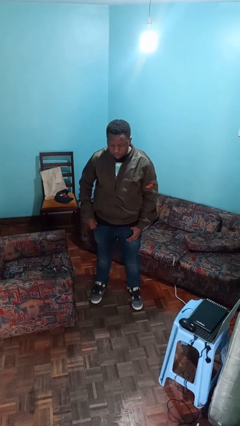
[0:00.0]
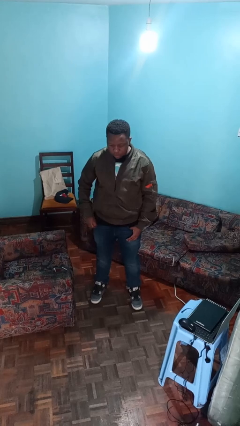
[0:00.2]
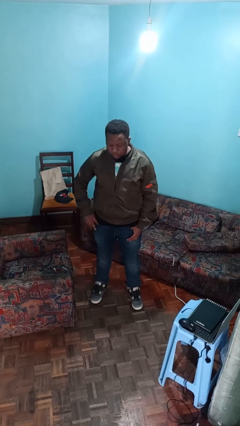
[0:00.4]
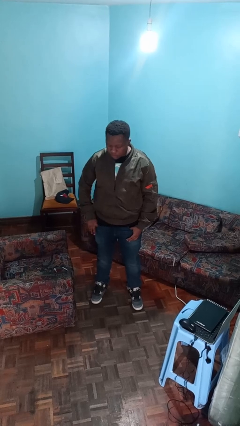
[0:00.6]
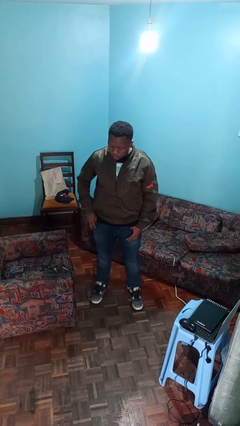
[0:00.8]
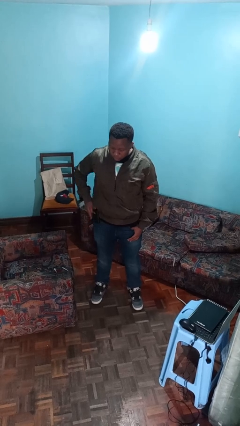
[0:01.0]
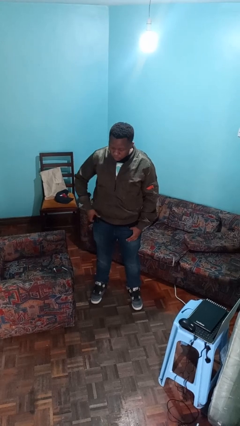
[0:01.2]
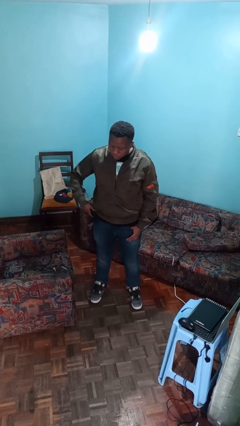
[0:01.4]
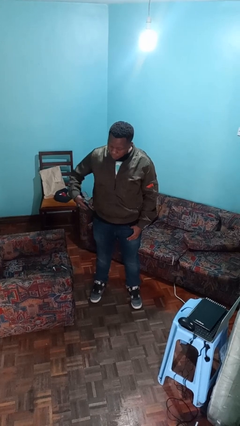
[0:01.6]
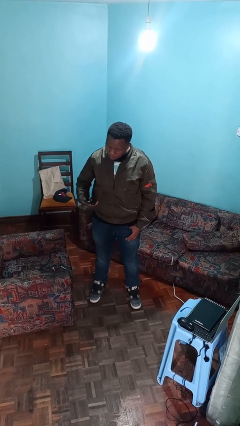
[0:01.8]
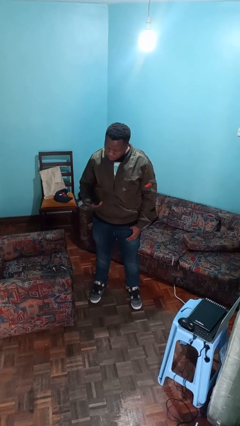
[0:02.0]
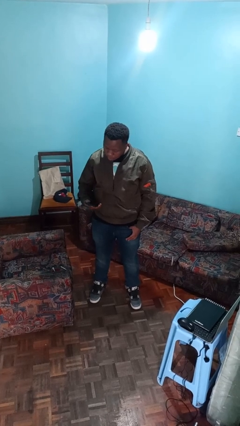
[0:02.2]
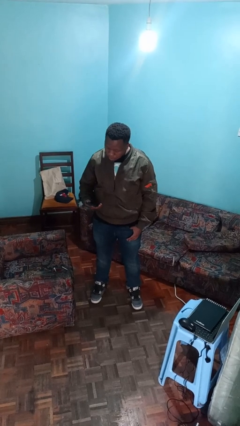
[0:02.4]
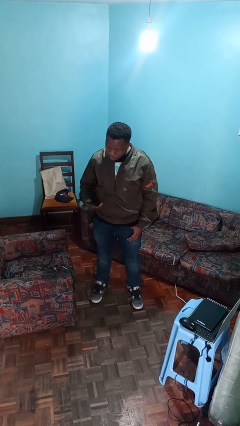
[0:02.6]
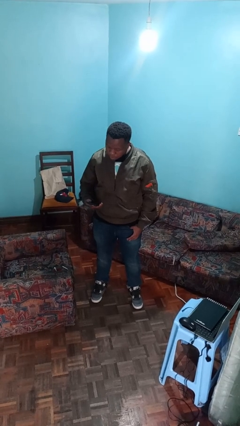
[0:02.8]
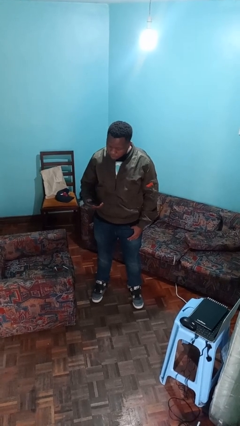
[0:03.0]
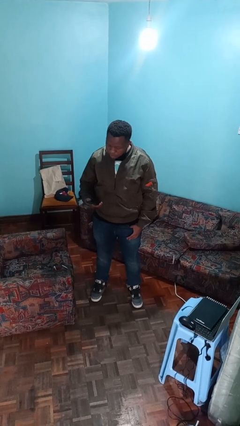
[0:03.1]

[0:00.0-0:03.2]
person takes phone from pocket

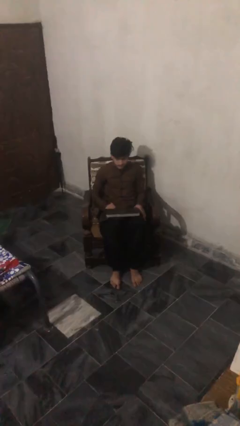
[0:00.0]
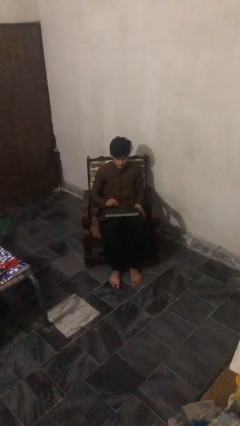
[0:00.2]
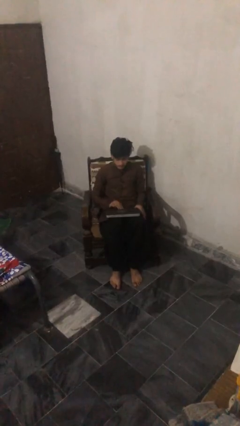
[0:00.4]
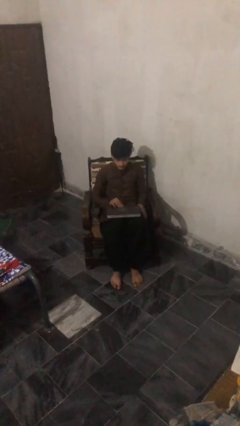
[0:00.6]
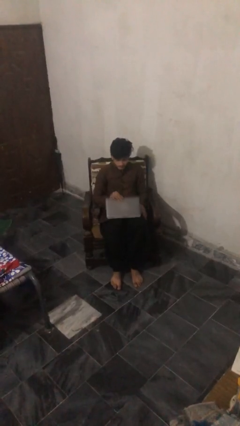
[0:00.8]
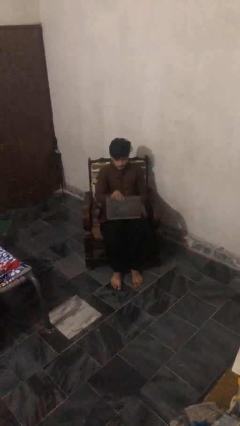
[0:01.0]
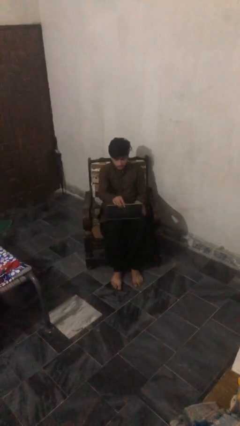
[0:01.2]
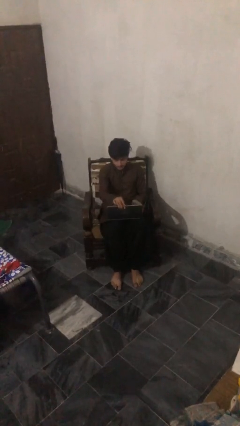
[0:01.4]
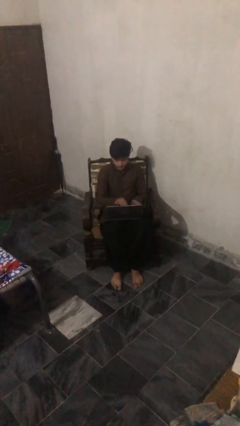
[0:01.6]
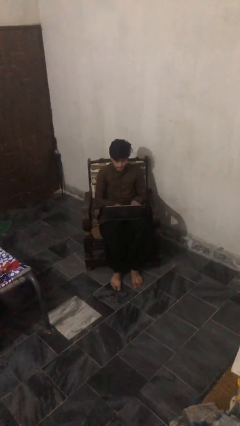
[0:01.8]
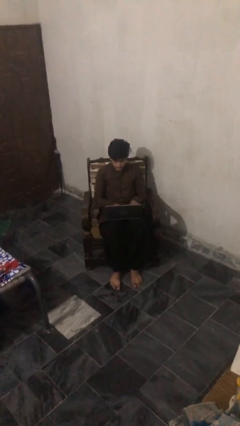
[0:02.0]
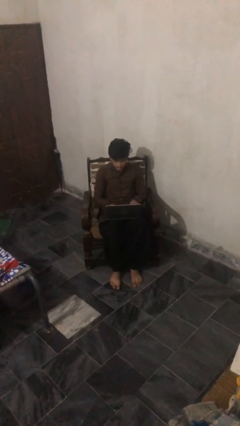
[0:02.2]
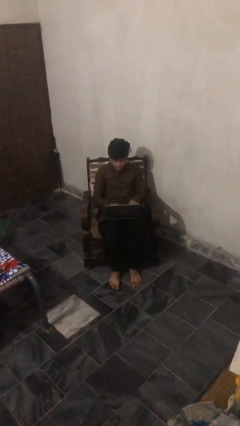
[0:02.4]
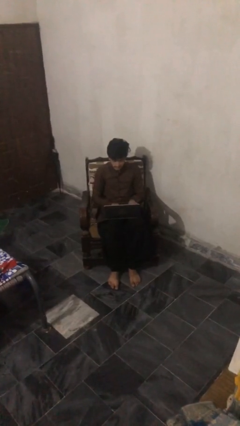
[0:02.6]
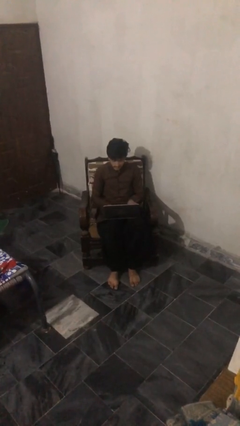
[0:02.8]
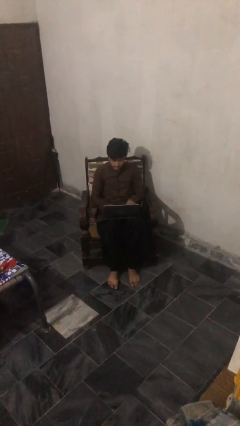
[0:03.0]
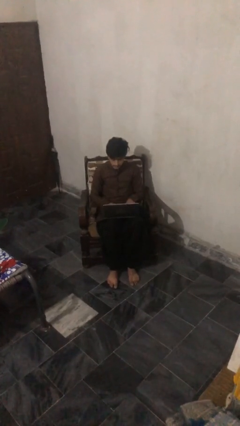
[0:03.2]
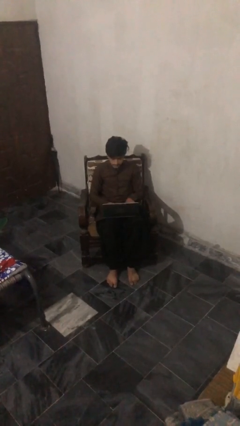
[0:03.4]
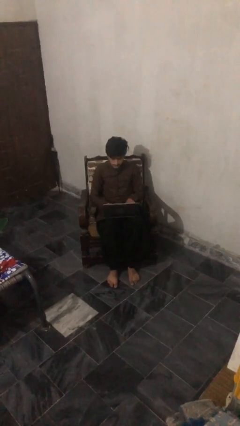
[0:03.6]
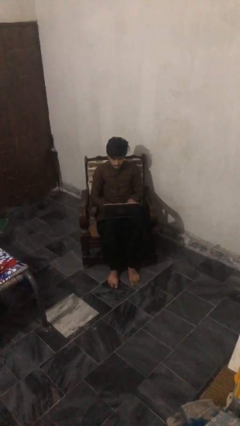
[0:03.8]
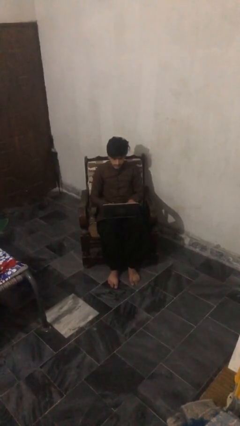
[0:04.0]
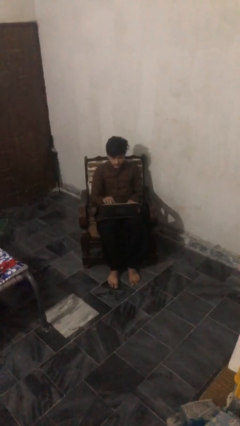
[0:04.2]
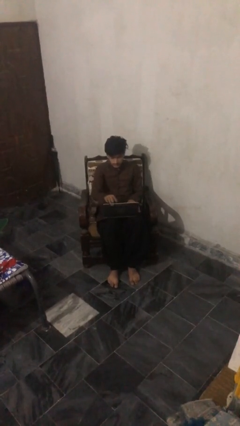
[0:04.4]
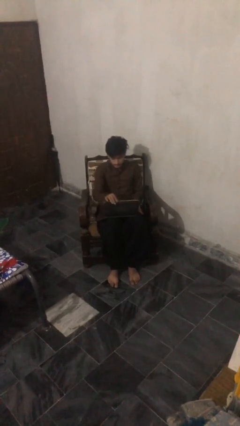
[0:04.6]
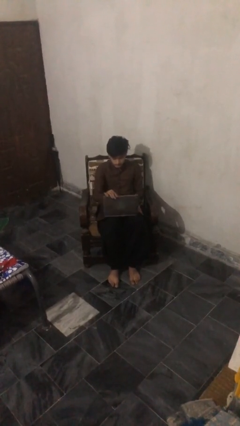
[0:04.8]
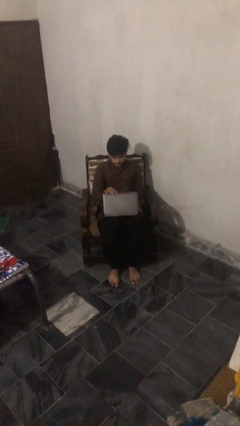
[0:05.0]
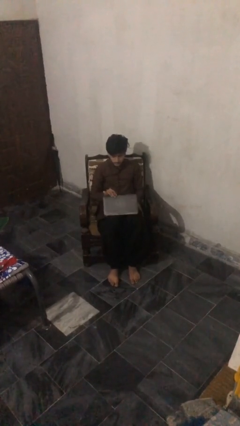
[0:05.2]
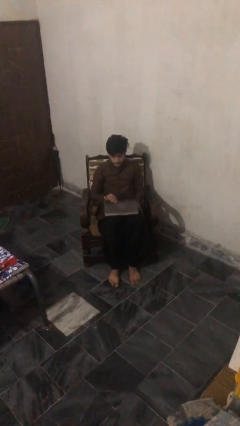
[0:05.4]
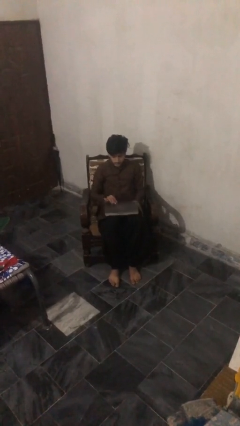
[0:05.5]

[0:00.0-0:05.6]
person interacts with laptop

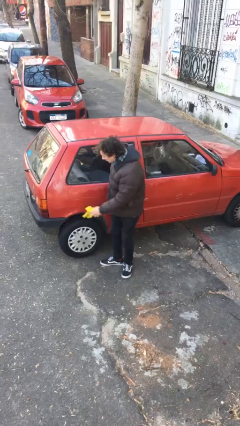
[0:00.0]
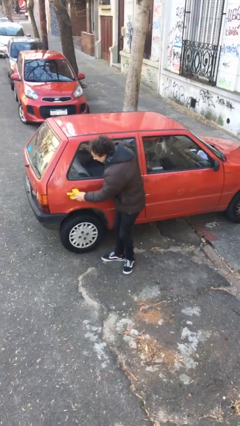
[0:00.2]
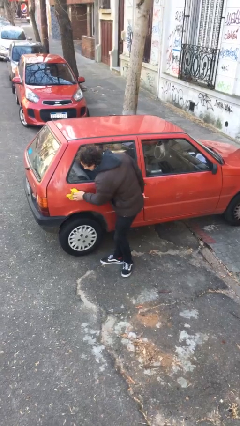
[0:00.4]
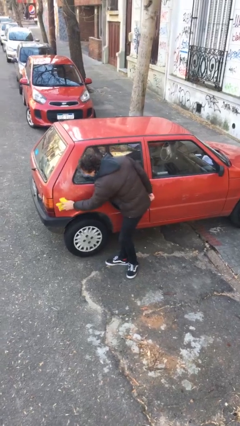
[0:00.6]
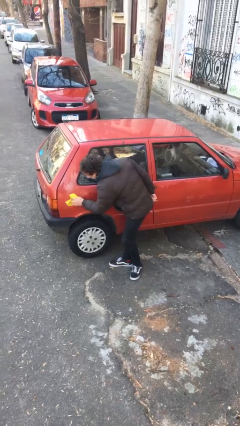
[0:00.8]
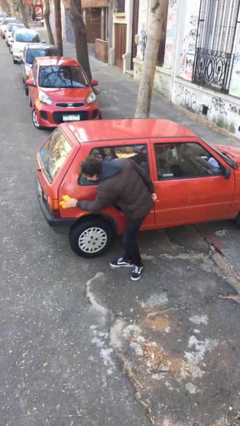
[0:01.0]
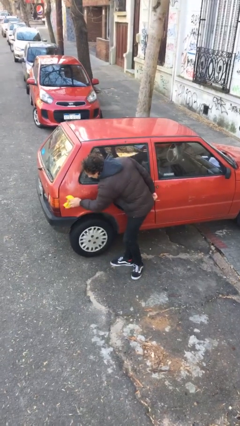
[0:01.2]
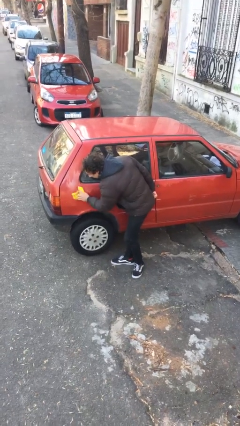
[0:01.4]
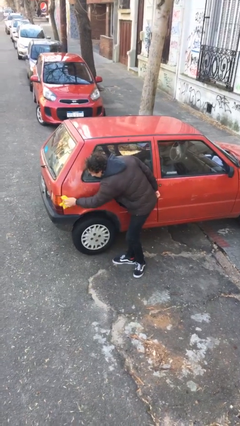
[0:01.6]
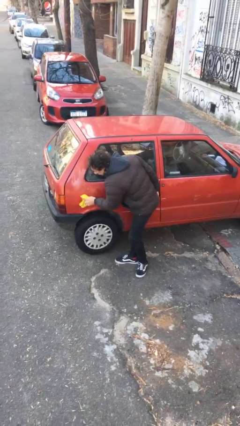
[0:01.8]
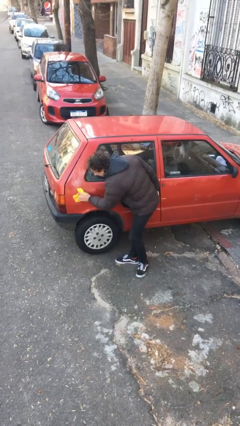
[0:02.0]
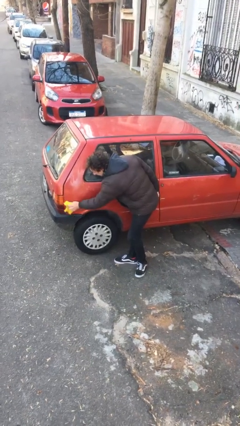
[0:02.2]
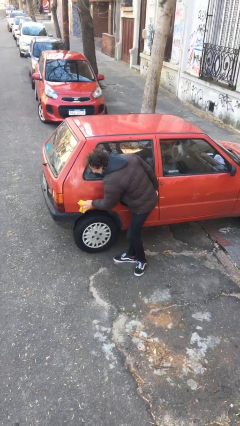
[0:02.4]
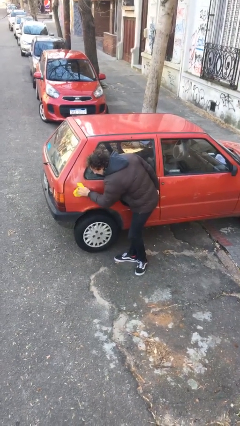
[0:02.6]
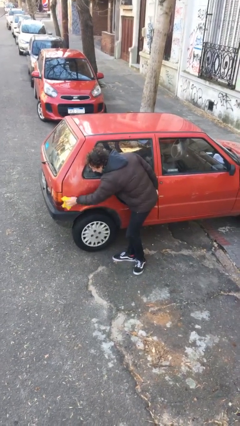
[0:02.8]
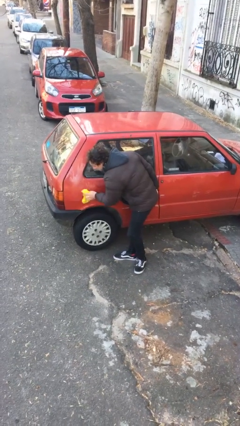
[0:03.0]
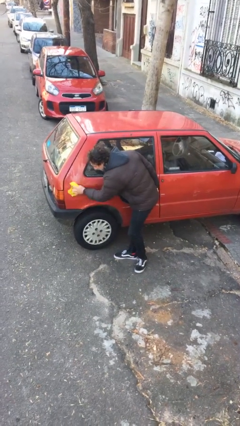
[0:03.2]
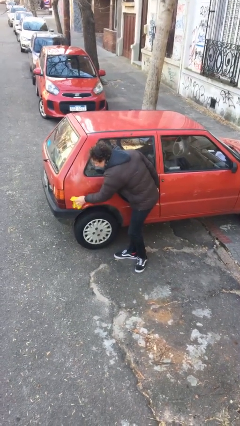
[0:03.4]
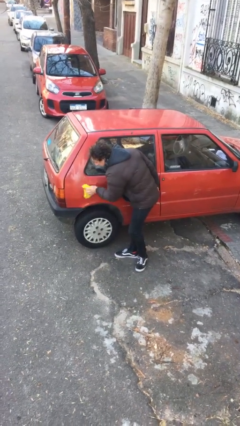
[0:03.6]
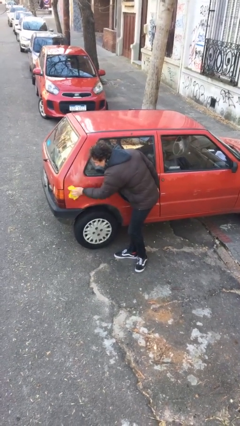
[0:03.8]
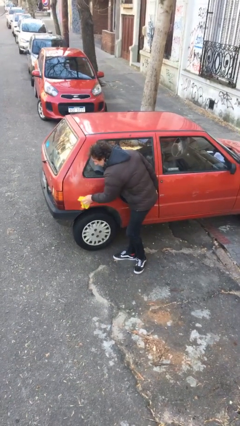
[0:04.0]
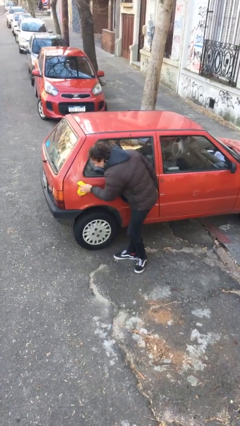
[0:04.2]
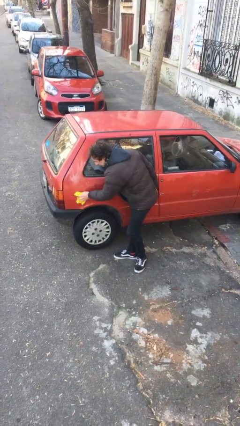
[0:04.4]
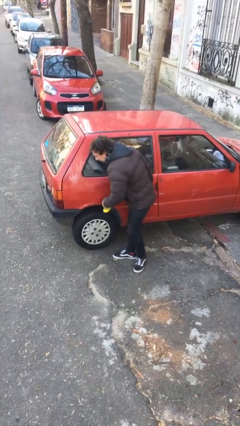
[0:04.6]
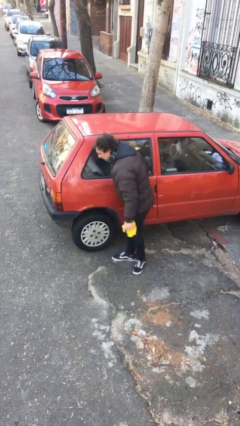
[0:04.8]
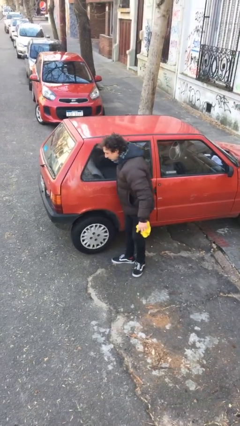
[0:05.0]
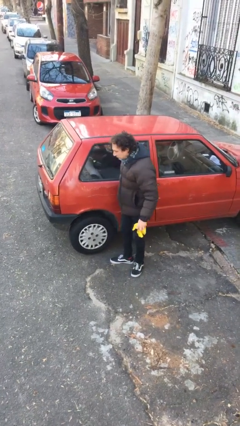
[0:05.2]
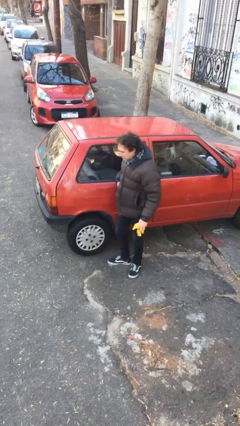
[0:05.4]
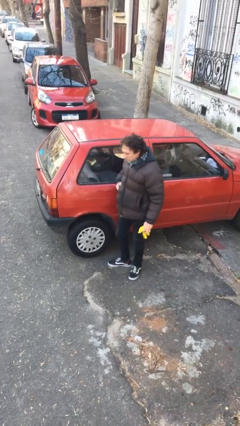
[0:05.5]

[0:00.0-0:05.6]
person polishes car with rag

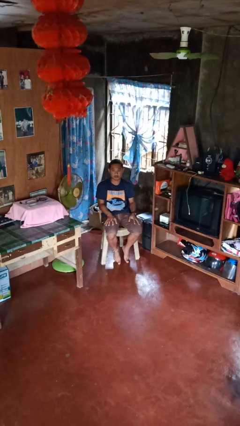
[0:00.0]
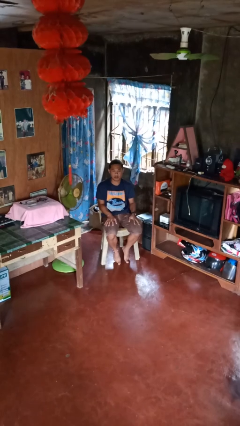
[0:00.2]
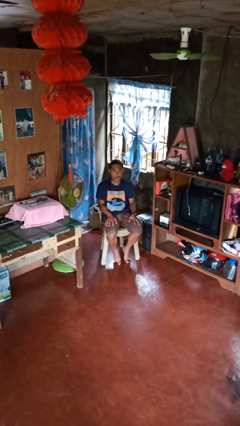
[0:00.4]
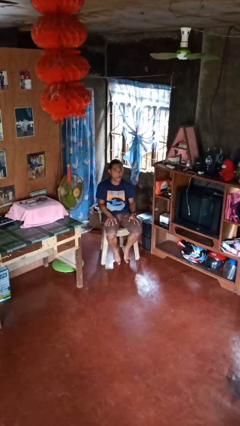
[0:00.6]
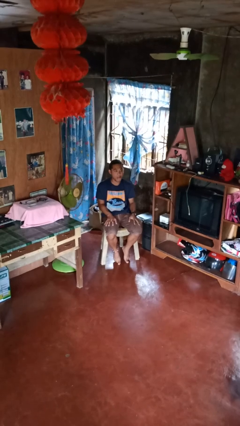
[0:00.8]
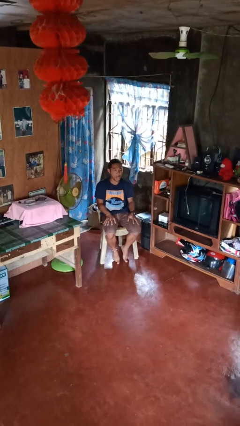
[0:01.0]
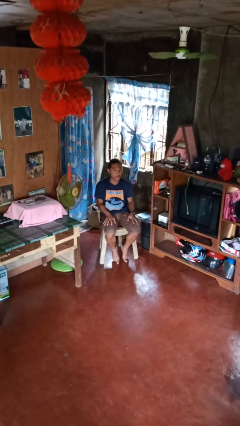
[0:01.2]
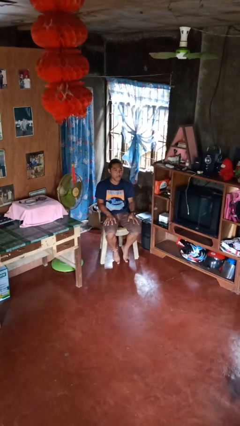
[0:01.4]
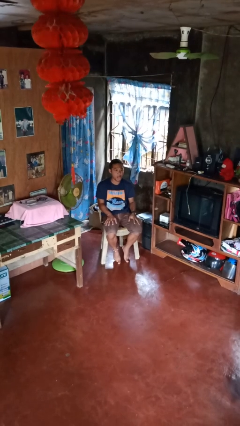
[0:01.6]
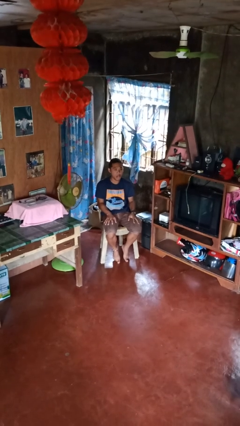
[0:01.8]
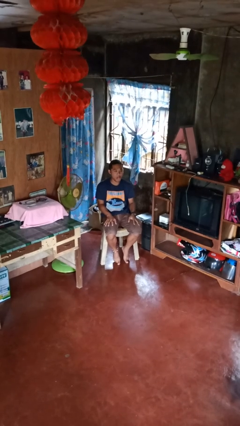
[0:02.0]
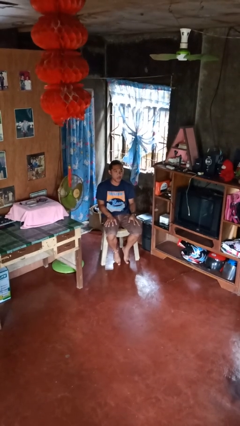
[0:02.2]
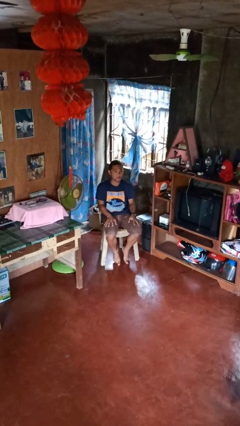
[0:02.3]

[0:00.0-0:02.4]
person sticks out tongue

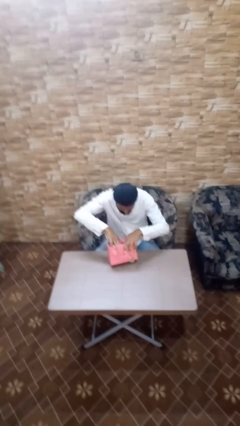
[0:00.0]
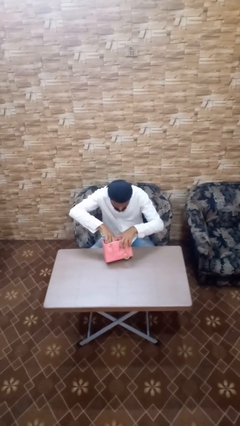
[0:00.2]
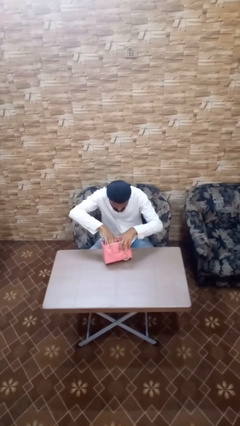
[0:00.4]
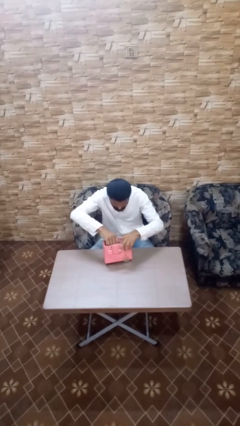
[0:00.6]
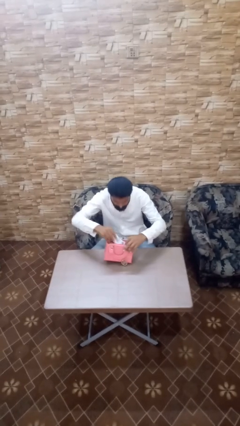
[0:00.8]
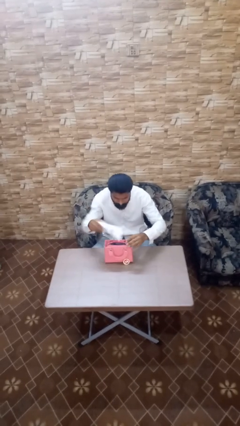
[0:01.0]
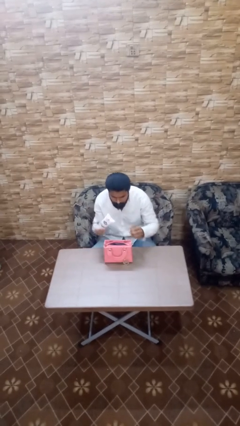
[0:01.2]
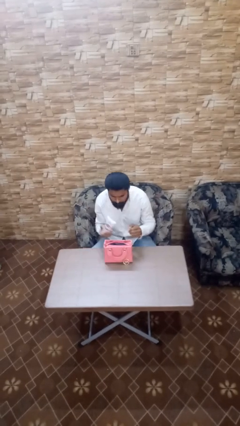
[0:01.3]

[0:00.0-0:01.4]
person takes object from purse
